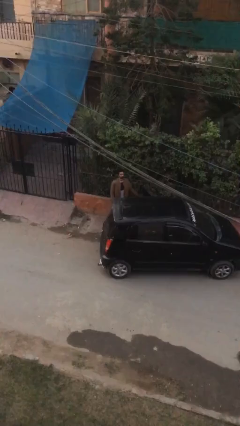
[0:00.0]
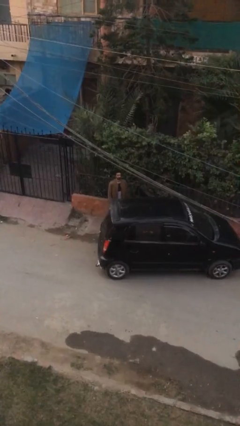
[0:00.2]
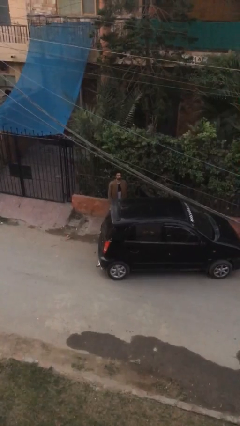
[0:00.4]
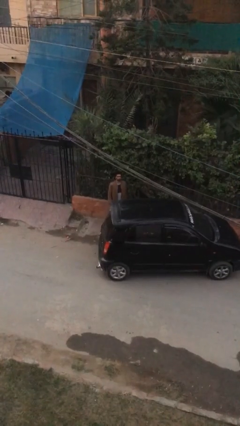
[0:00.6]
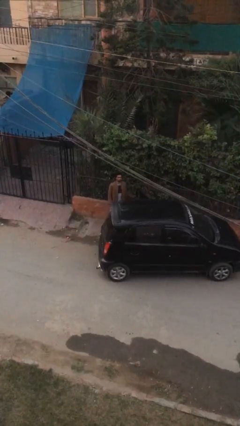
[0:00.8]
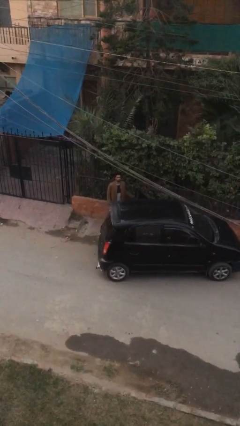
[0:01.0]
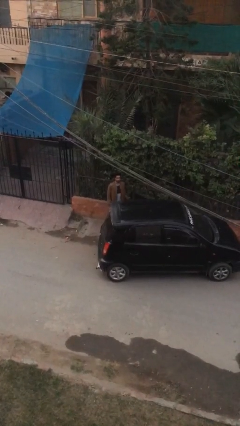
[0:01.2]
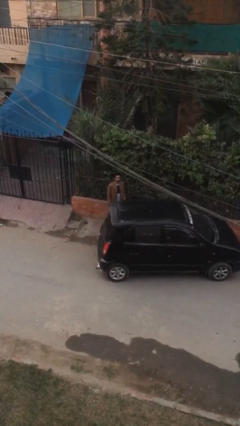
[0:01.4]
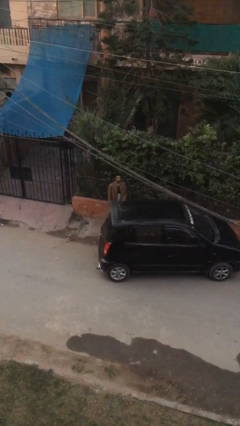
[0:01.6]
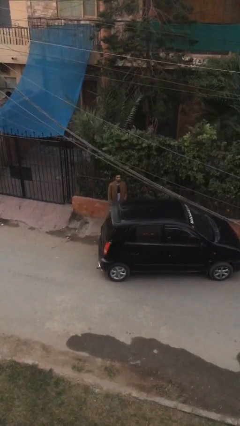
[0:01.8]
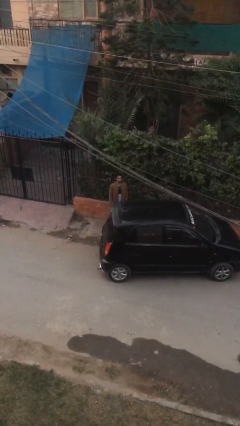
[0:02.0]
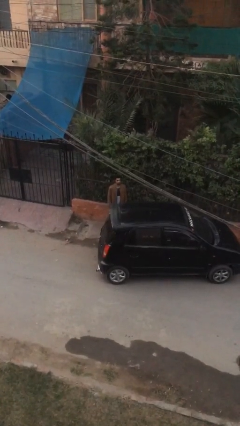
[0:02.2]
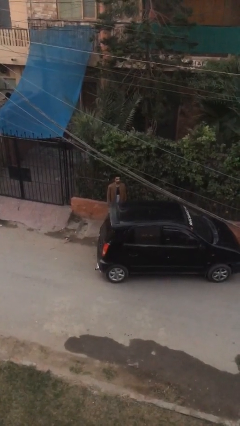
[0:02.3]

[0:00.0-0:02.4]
person closes car door

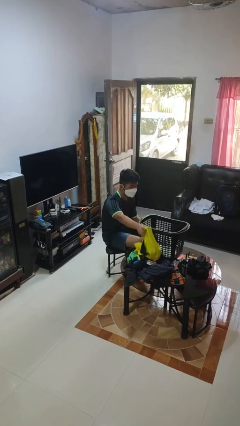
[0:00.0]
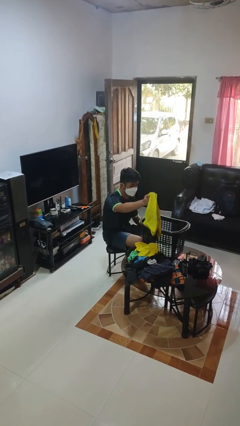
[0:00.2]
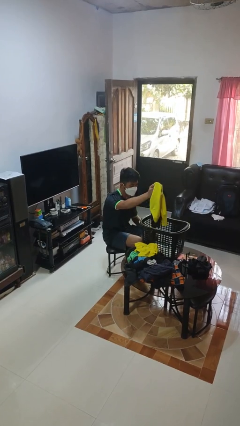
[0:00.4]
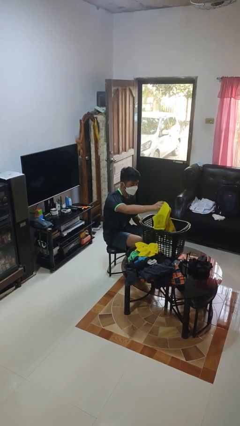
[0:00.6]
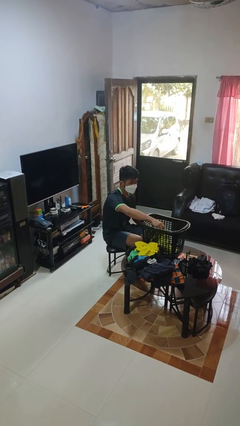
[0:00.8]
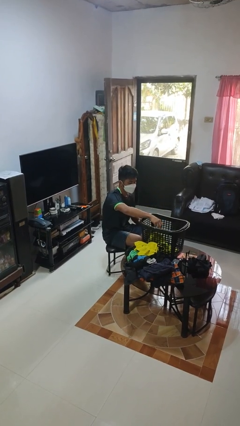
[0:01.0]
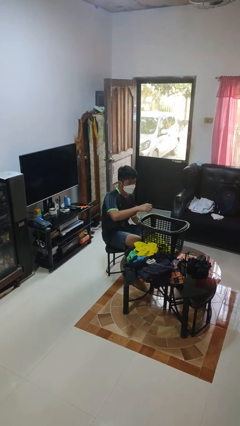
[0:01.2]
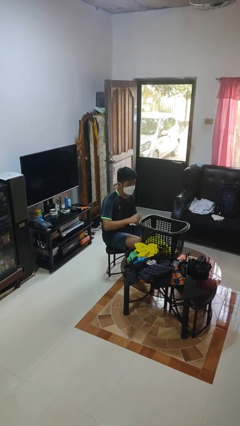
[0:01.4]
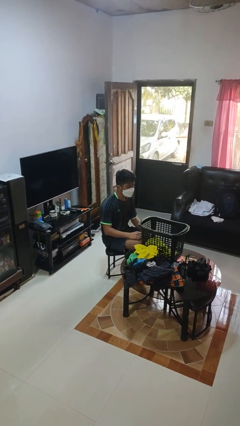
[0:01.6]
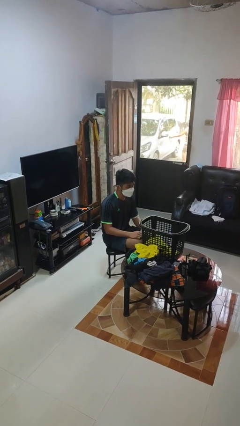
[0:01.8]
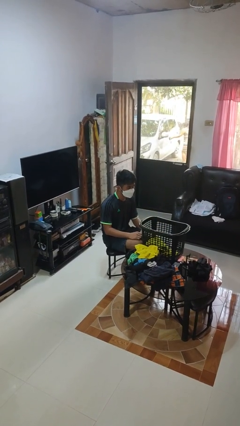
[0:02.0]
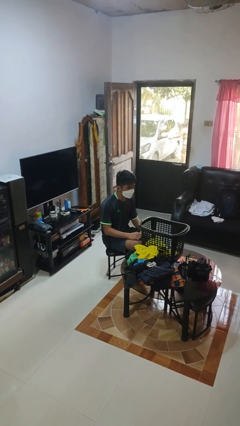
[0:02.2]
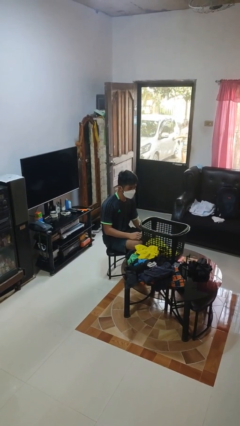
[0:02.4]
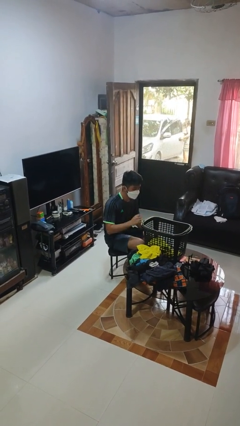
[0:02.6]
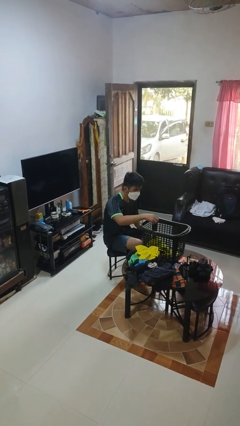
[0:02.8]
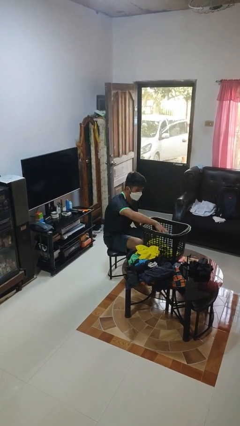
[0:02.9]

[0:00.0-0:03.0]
person puts object into basket

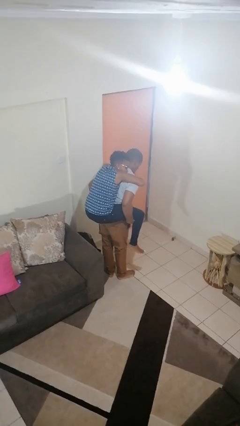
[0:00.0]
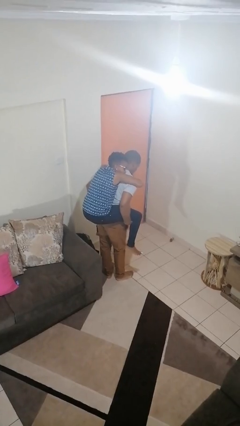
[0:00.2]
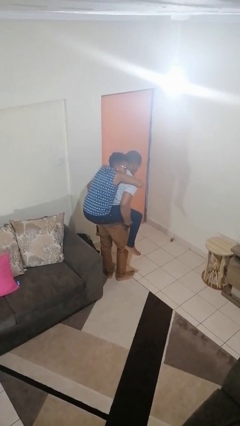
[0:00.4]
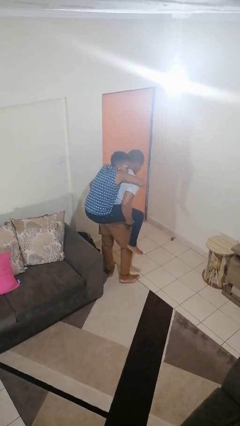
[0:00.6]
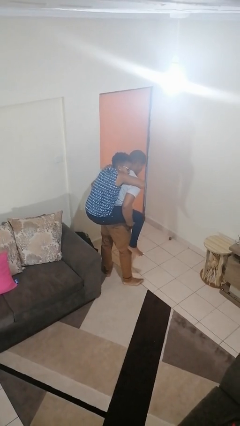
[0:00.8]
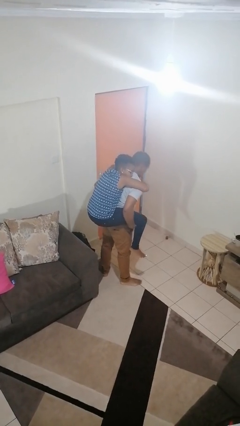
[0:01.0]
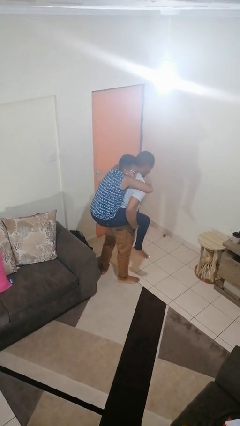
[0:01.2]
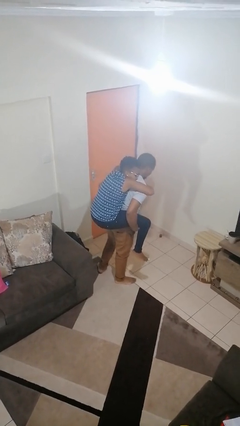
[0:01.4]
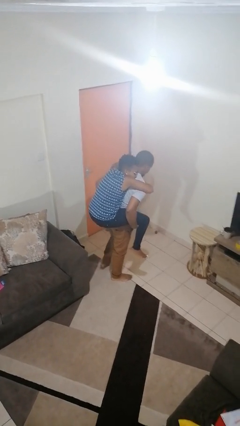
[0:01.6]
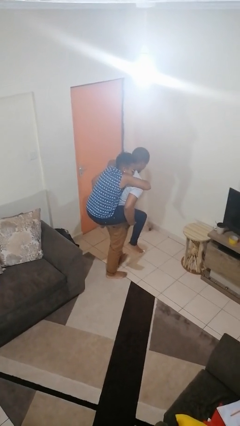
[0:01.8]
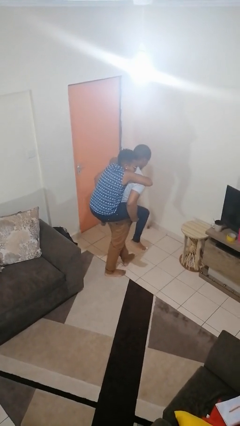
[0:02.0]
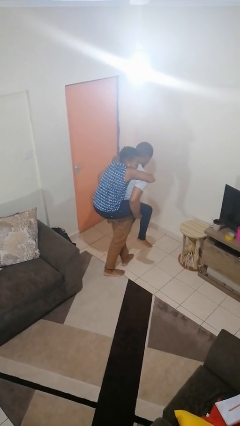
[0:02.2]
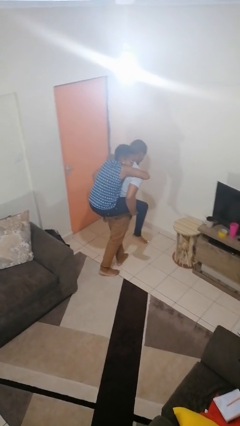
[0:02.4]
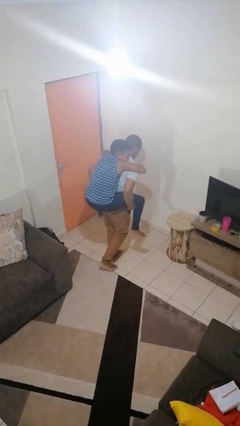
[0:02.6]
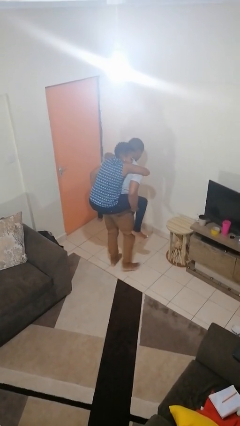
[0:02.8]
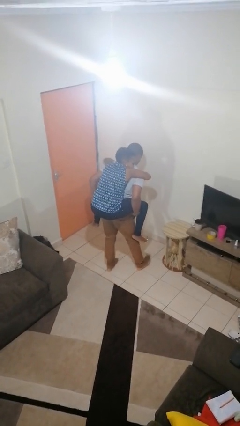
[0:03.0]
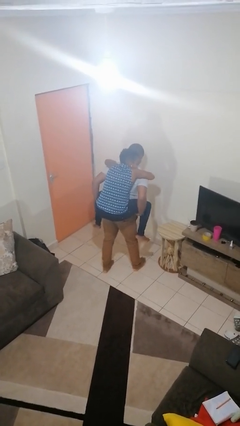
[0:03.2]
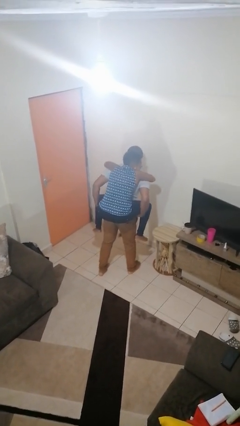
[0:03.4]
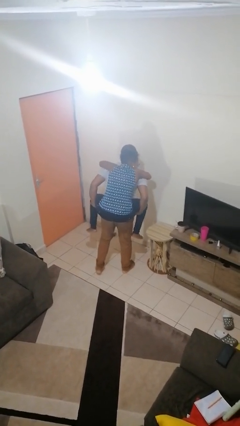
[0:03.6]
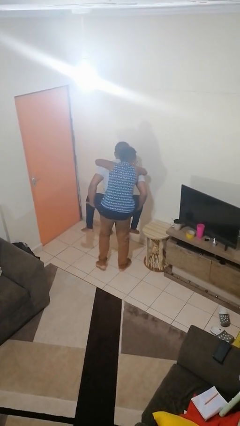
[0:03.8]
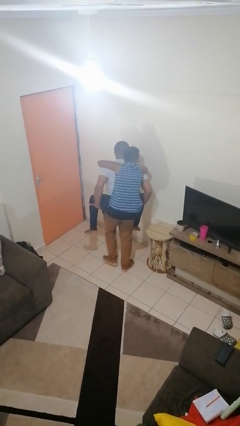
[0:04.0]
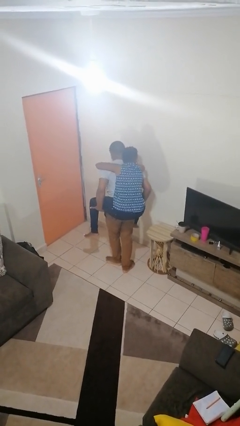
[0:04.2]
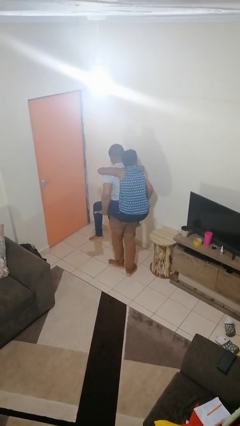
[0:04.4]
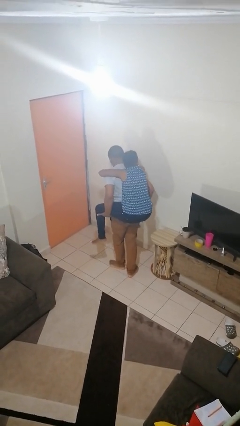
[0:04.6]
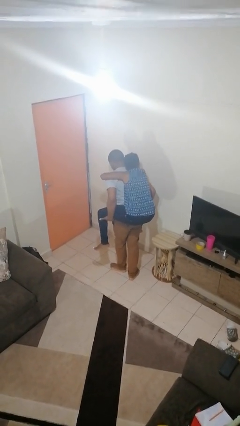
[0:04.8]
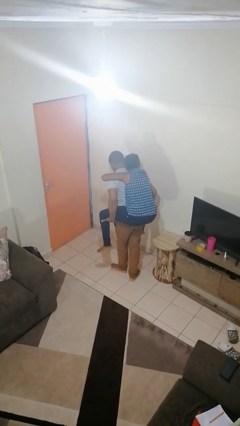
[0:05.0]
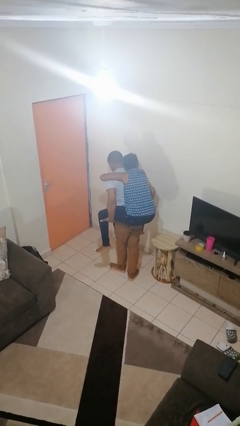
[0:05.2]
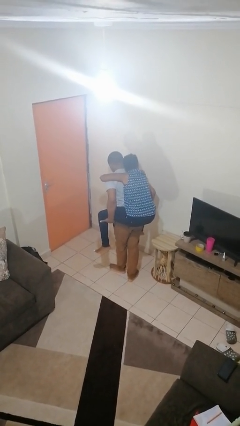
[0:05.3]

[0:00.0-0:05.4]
person carries person on back

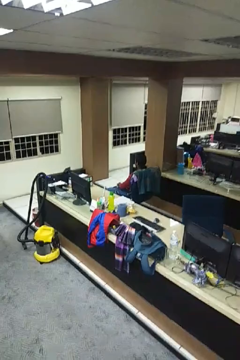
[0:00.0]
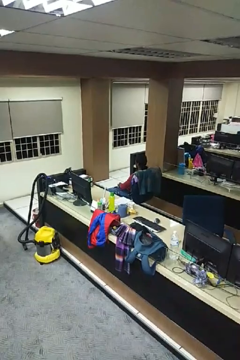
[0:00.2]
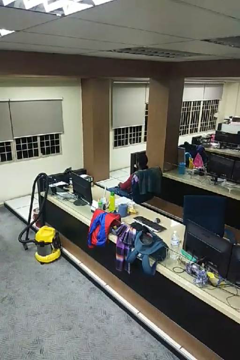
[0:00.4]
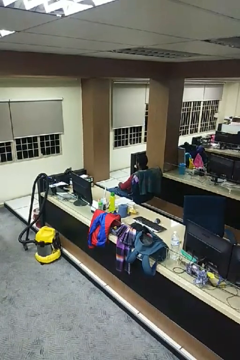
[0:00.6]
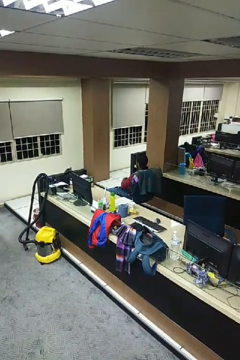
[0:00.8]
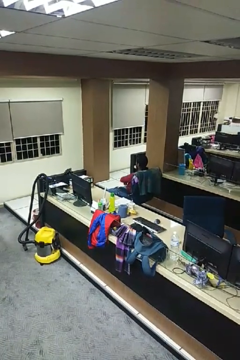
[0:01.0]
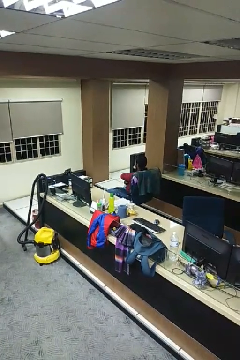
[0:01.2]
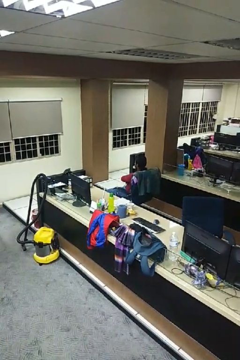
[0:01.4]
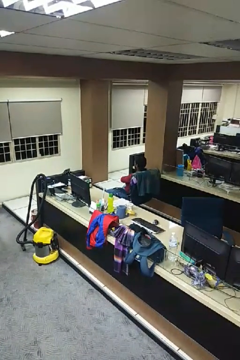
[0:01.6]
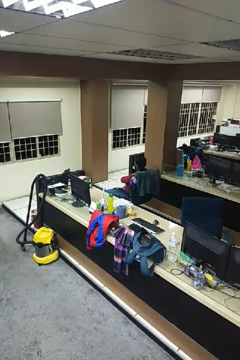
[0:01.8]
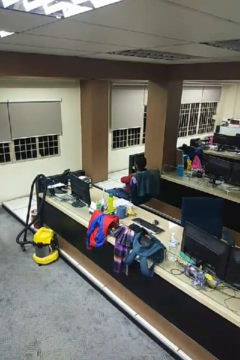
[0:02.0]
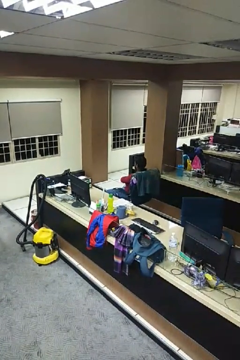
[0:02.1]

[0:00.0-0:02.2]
person crosses arms

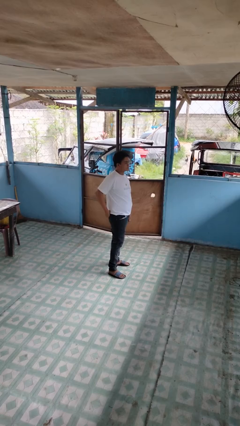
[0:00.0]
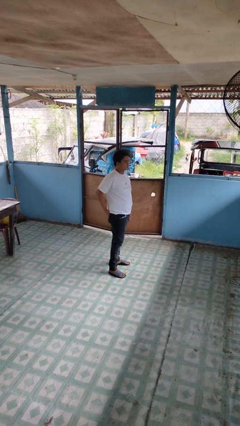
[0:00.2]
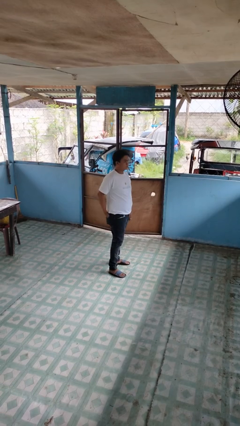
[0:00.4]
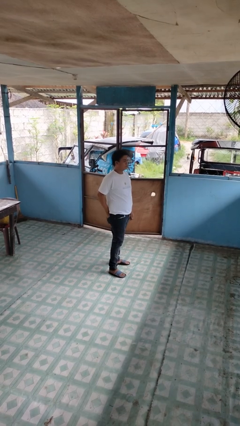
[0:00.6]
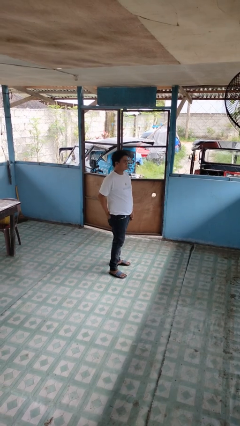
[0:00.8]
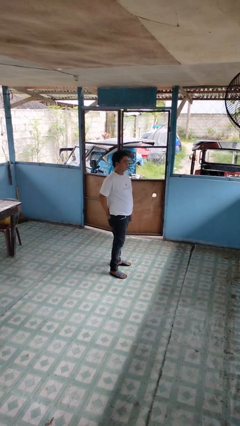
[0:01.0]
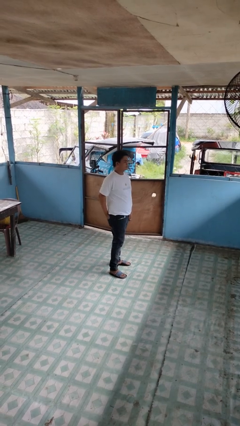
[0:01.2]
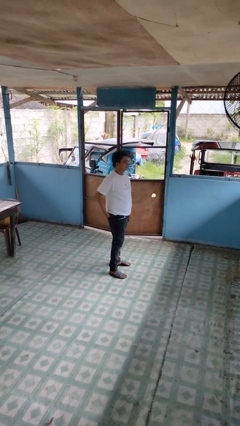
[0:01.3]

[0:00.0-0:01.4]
person puts hands in back pockets

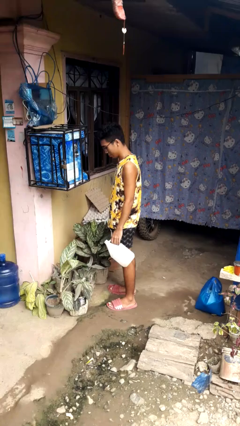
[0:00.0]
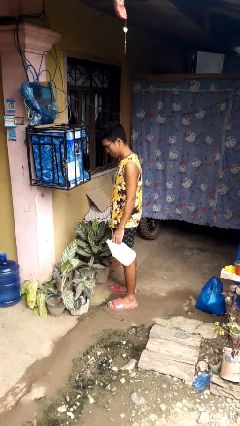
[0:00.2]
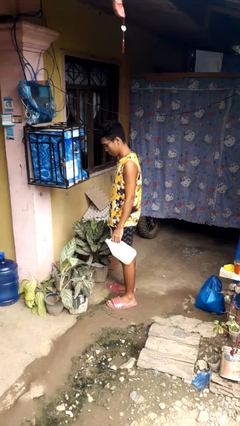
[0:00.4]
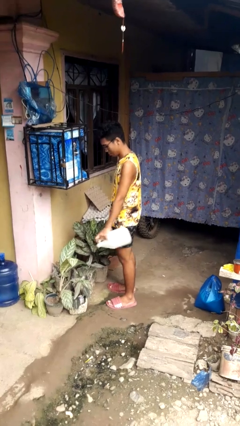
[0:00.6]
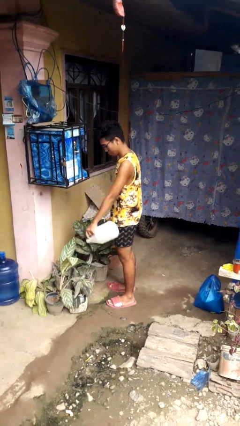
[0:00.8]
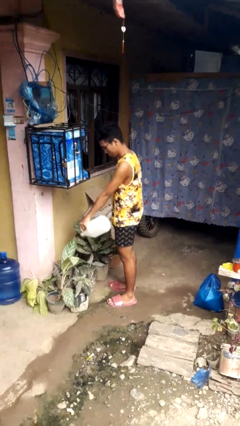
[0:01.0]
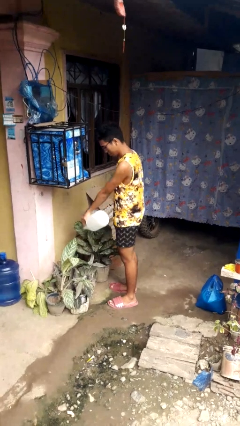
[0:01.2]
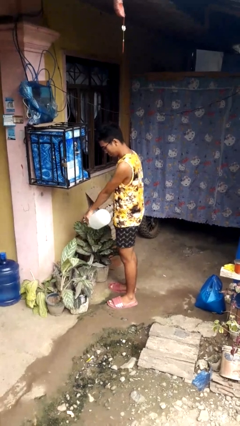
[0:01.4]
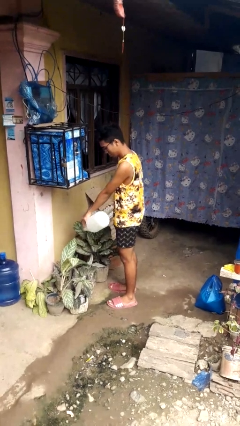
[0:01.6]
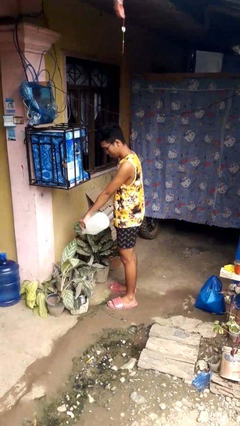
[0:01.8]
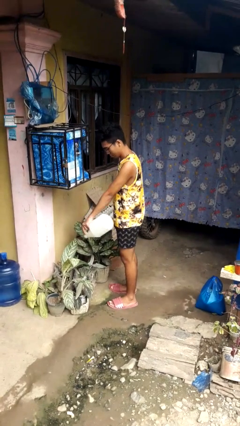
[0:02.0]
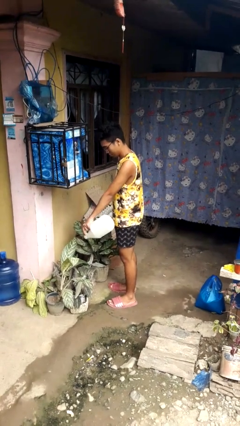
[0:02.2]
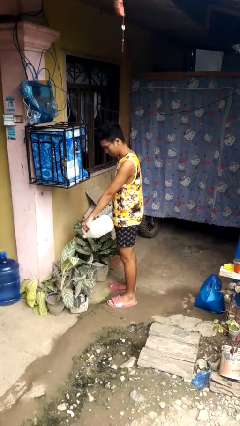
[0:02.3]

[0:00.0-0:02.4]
person waters houseplant

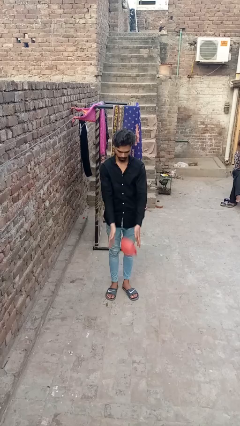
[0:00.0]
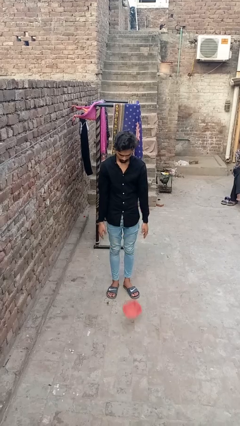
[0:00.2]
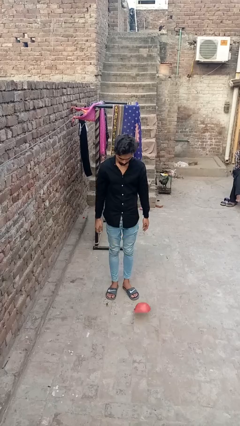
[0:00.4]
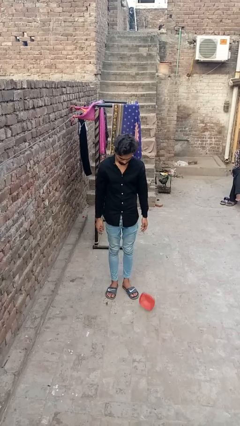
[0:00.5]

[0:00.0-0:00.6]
person catches dropped object

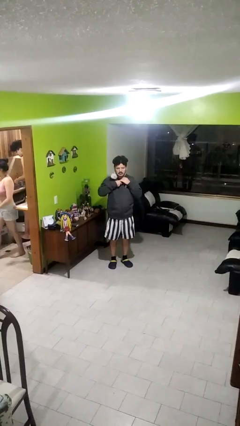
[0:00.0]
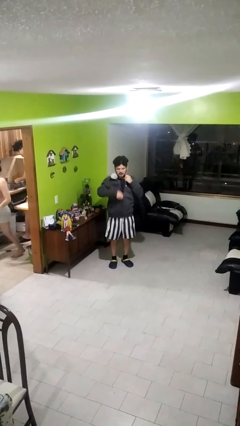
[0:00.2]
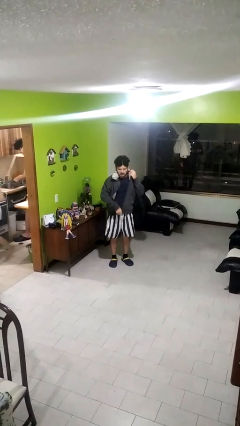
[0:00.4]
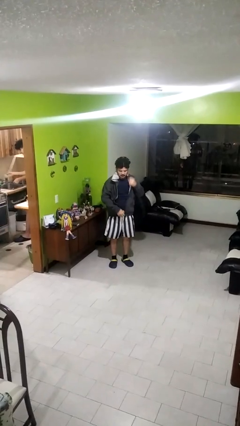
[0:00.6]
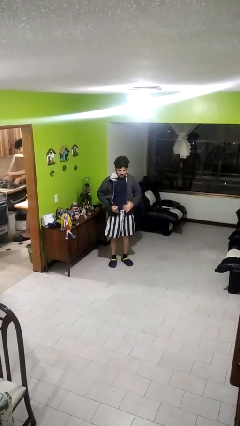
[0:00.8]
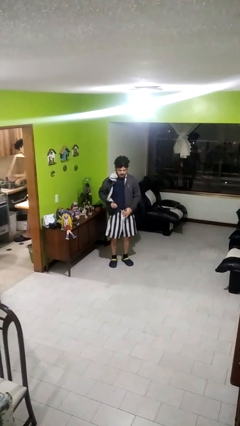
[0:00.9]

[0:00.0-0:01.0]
person unzips jacket
